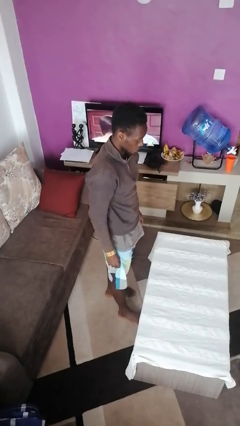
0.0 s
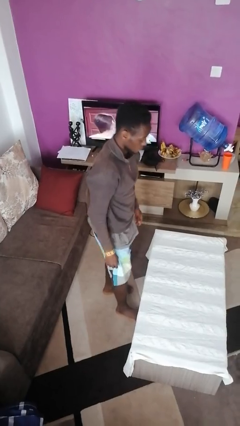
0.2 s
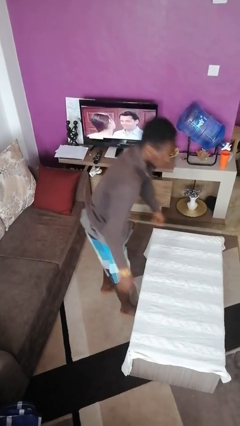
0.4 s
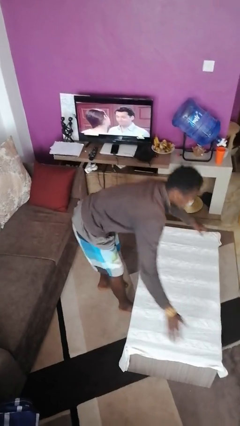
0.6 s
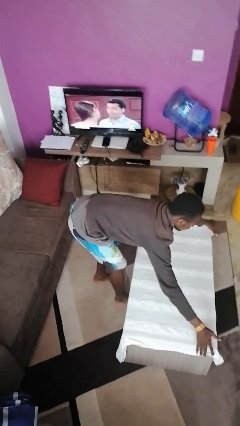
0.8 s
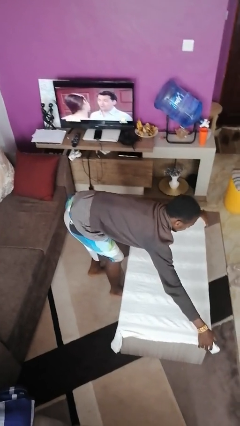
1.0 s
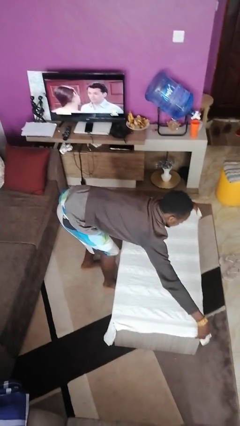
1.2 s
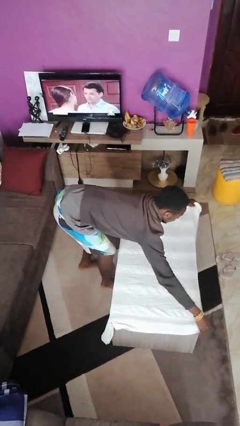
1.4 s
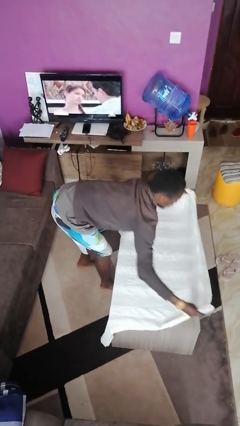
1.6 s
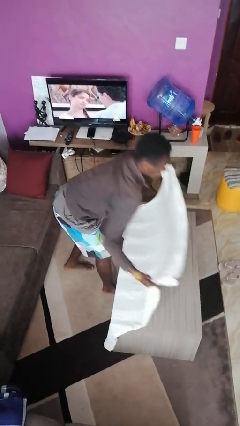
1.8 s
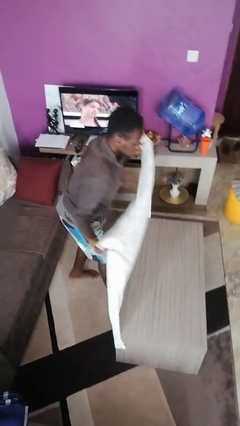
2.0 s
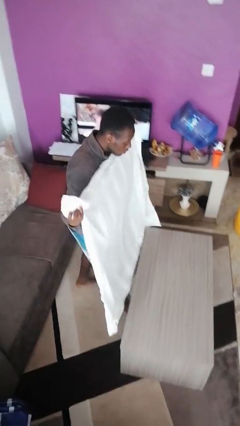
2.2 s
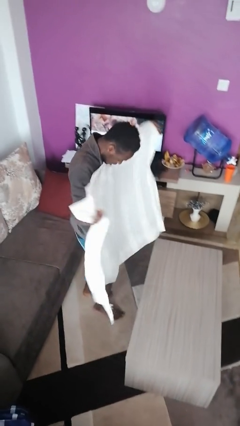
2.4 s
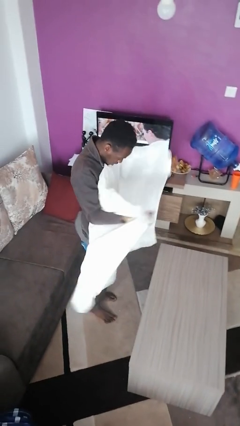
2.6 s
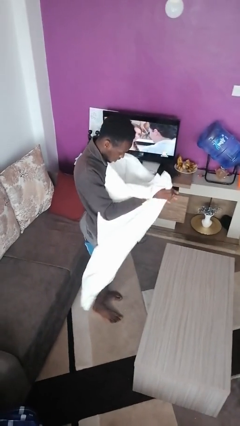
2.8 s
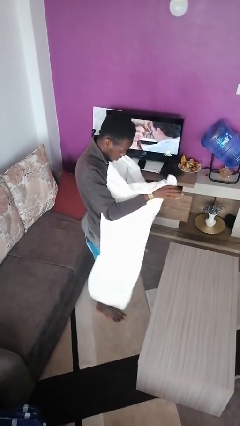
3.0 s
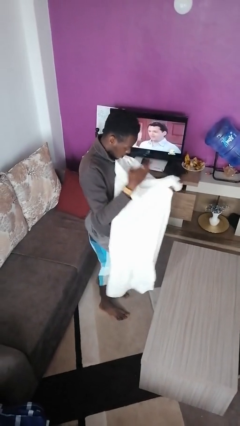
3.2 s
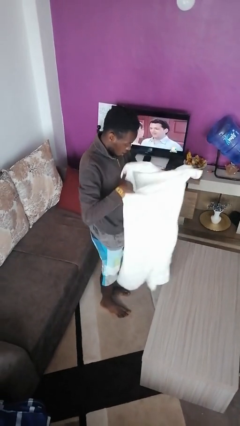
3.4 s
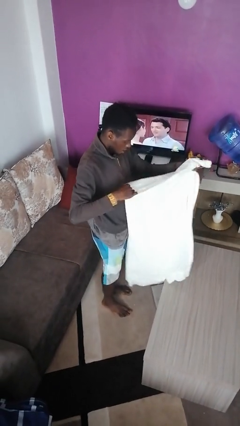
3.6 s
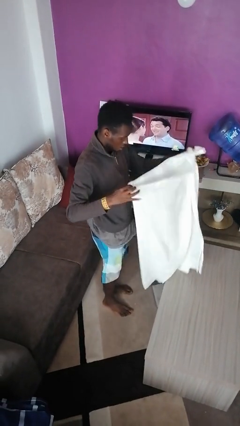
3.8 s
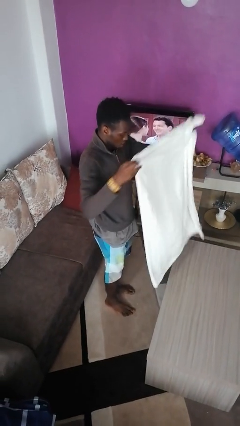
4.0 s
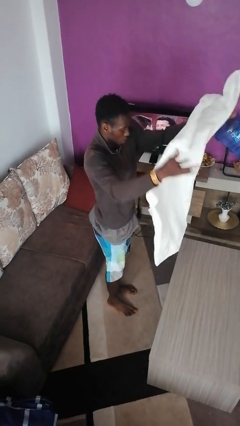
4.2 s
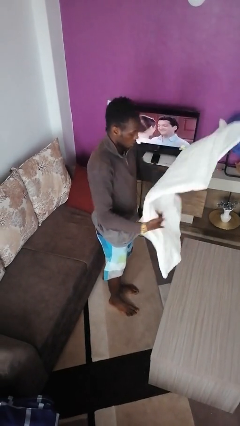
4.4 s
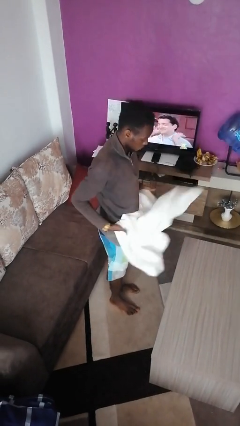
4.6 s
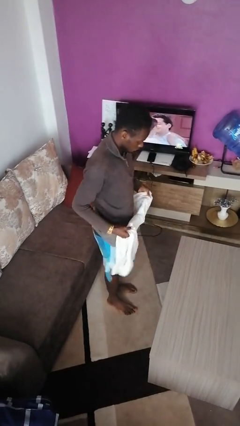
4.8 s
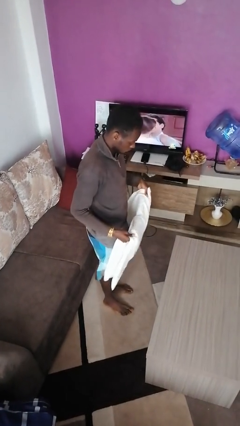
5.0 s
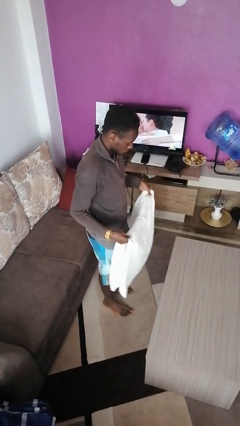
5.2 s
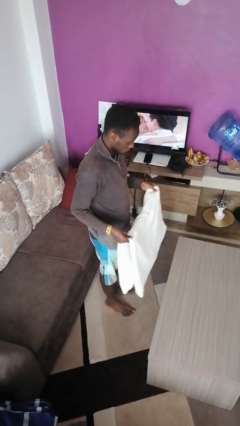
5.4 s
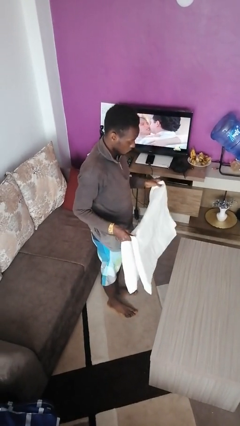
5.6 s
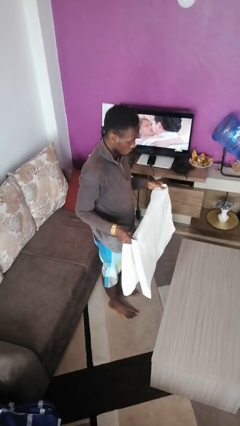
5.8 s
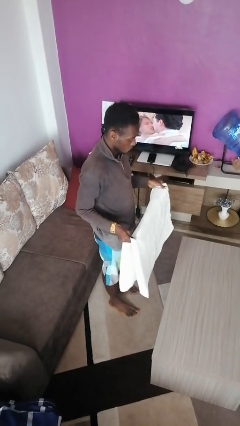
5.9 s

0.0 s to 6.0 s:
person folds tablecloth

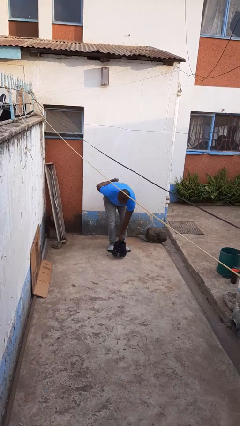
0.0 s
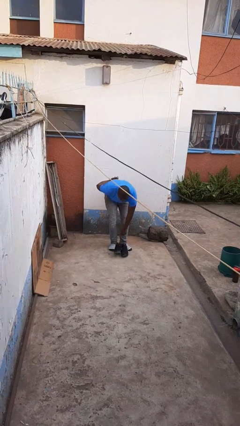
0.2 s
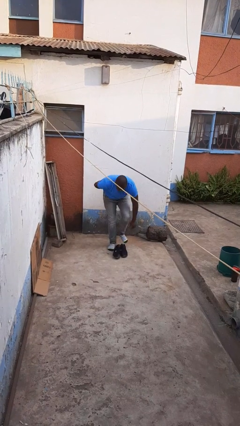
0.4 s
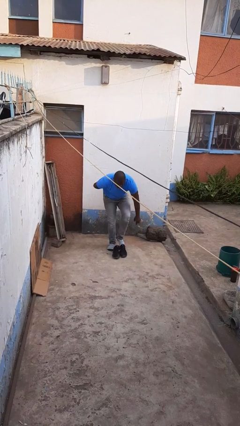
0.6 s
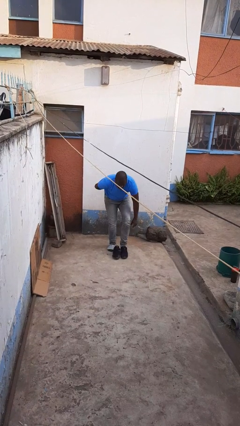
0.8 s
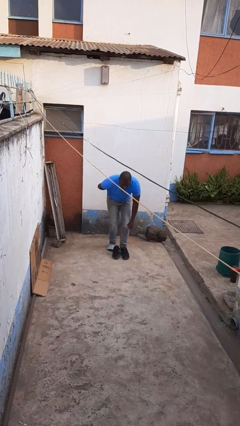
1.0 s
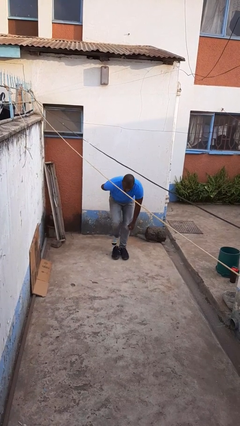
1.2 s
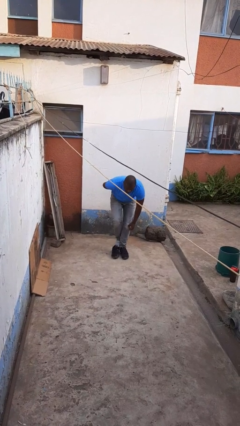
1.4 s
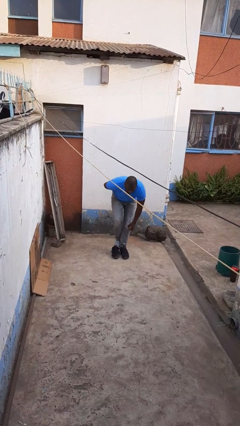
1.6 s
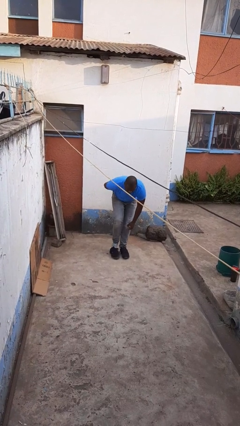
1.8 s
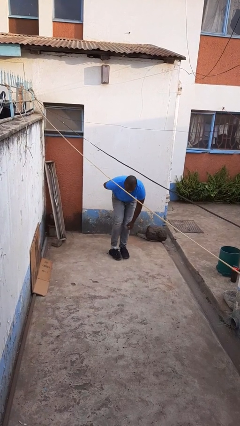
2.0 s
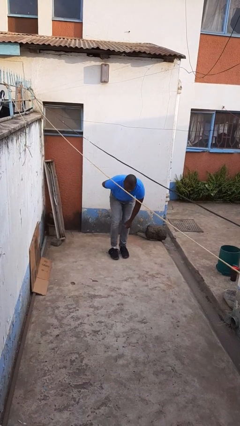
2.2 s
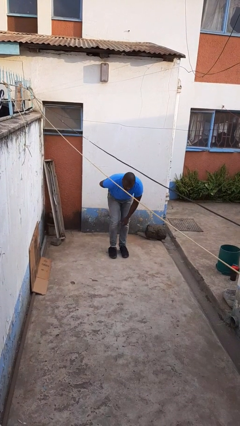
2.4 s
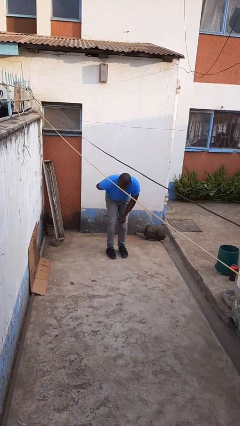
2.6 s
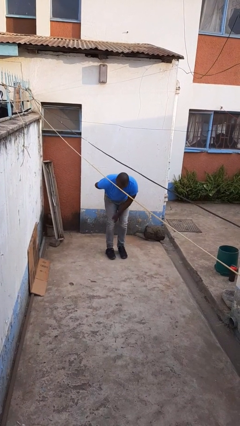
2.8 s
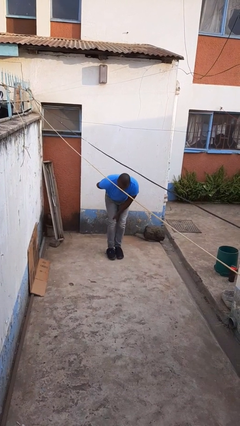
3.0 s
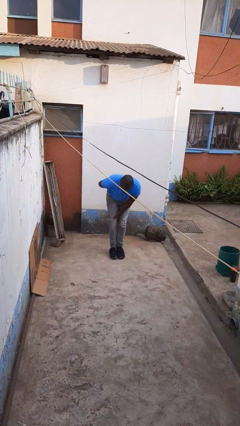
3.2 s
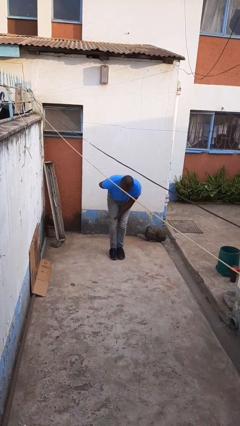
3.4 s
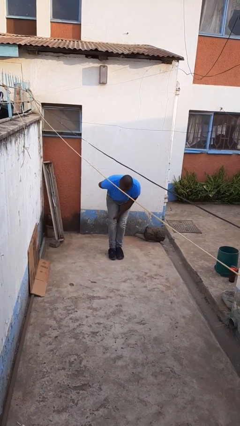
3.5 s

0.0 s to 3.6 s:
person puts on shoes

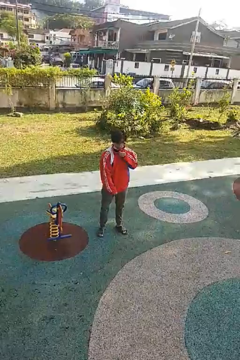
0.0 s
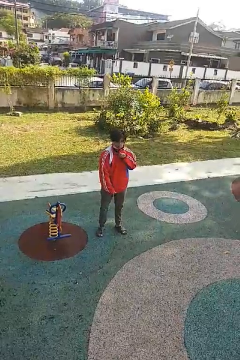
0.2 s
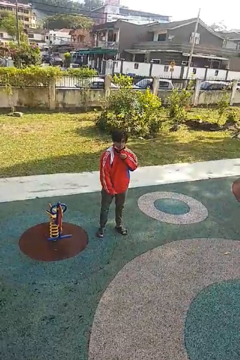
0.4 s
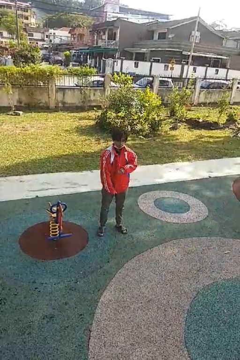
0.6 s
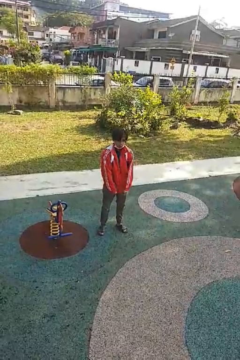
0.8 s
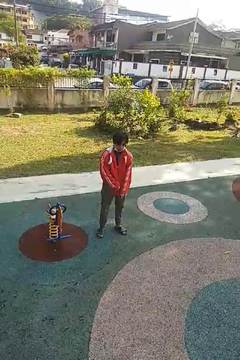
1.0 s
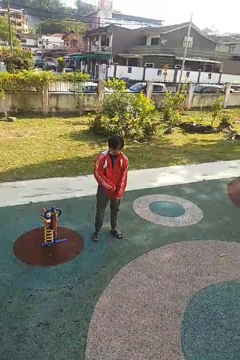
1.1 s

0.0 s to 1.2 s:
person unzips jacket

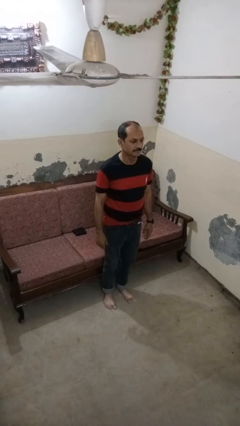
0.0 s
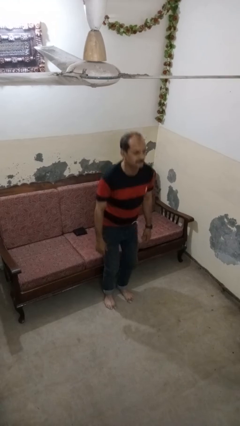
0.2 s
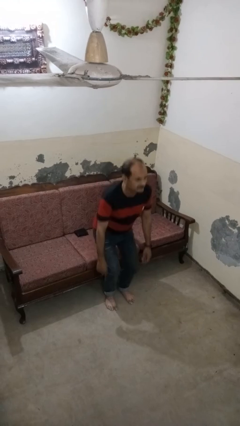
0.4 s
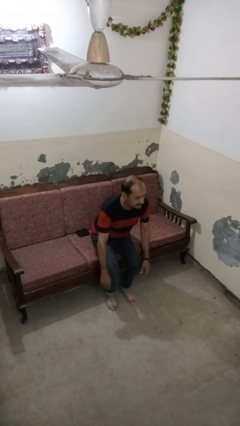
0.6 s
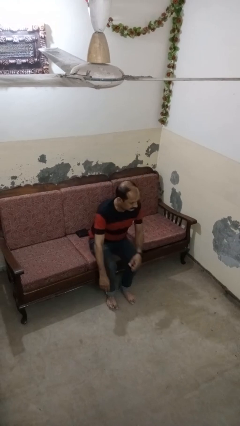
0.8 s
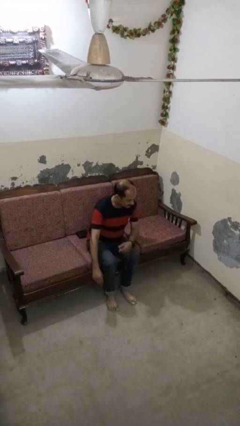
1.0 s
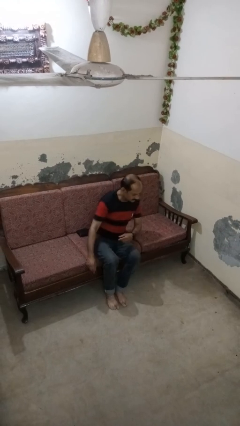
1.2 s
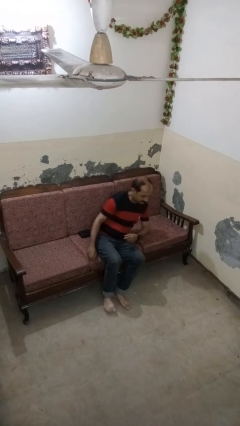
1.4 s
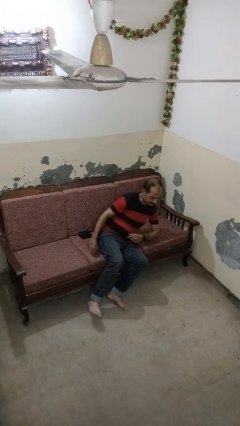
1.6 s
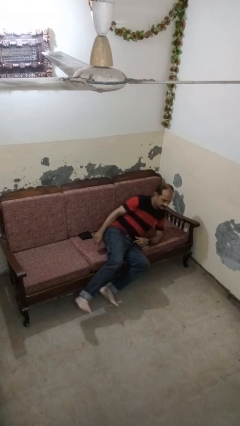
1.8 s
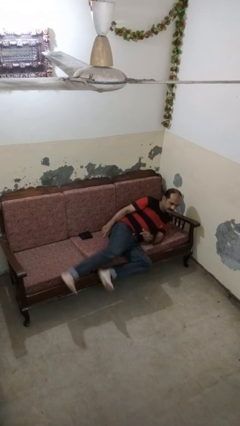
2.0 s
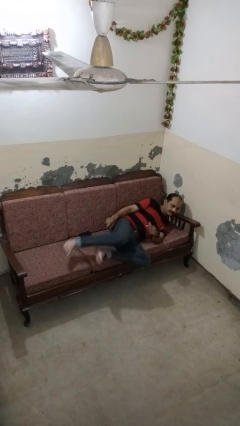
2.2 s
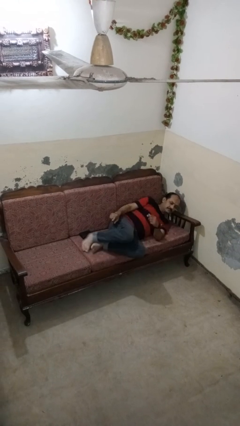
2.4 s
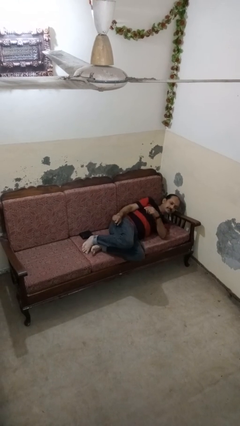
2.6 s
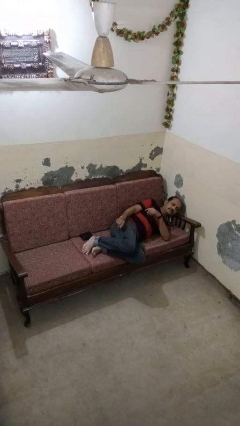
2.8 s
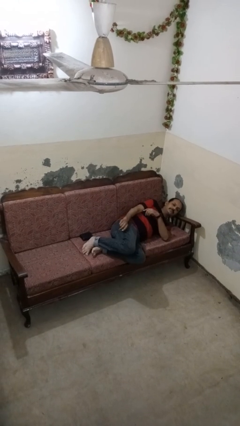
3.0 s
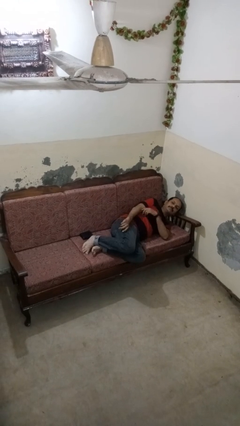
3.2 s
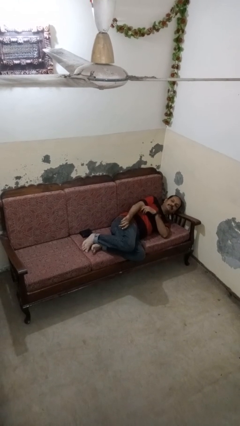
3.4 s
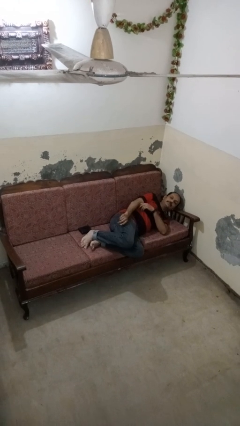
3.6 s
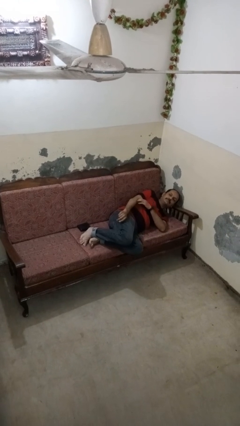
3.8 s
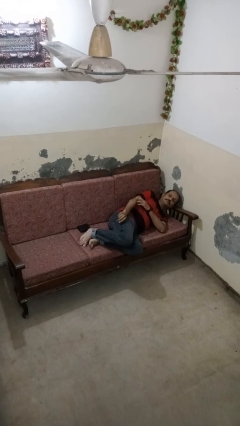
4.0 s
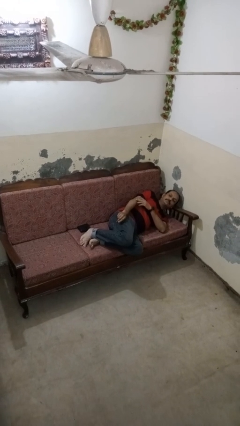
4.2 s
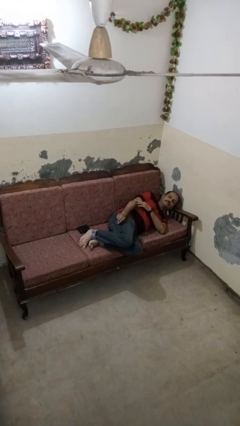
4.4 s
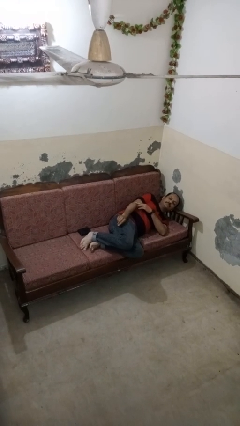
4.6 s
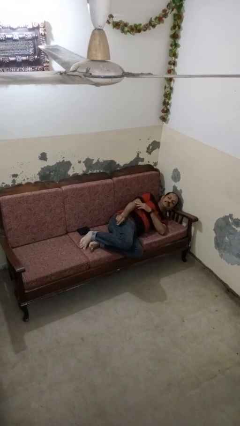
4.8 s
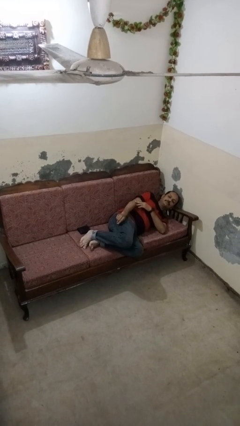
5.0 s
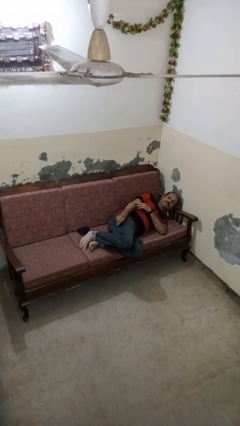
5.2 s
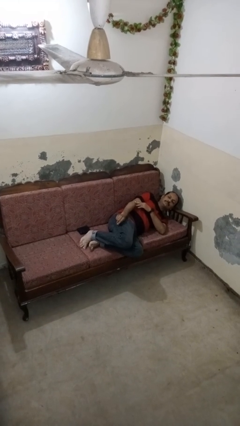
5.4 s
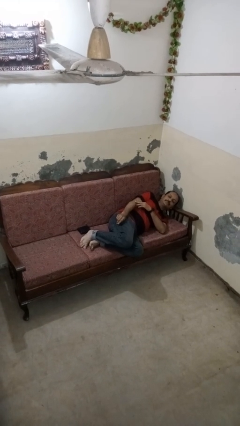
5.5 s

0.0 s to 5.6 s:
person lies down on couch

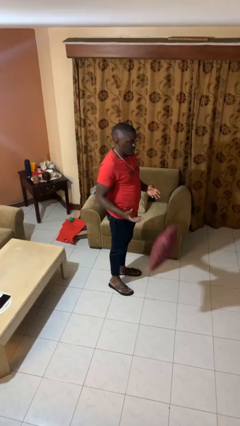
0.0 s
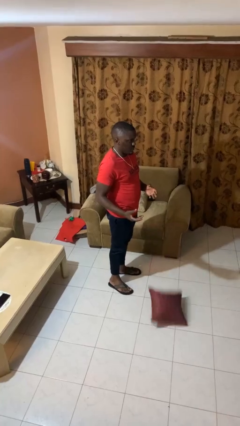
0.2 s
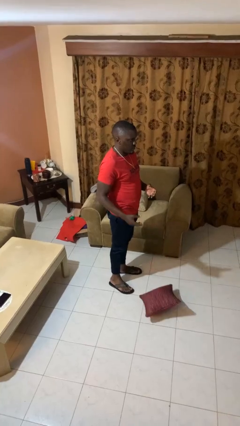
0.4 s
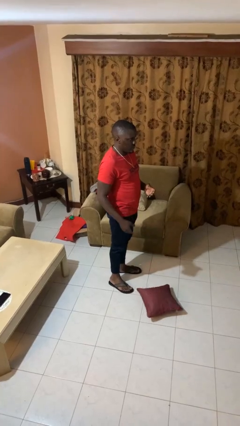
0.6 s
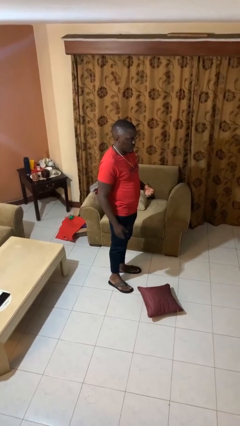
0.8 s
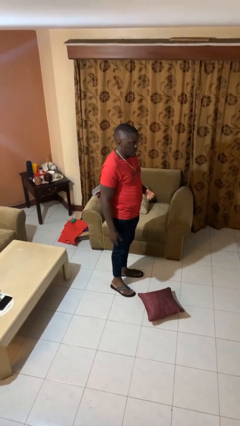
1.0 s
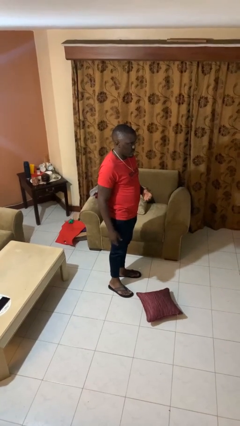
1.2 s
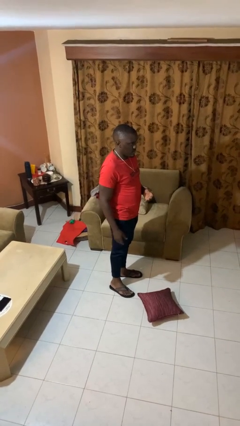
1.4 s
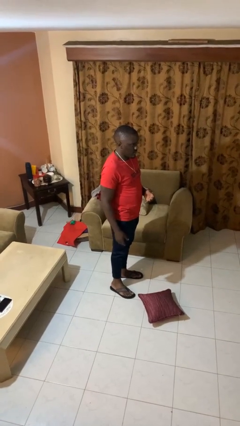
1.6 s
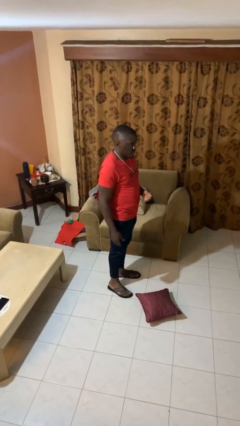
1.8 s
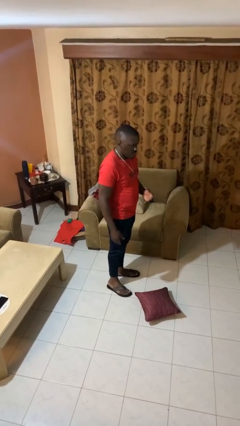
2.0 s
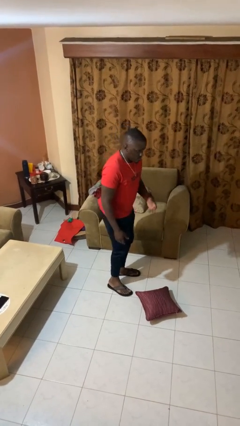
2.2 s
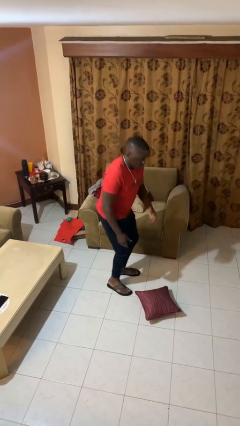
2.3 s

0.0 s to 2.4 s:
person drops object
